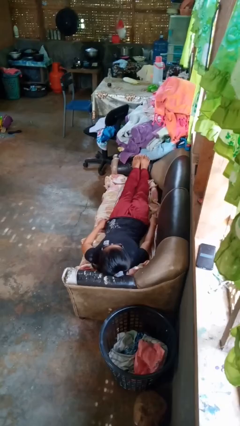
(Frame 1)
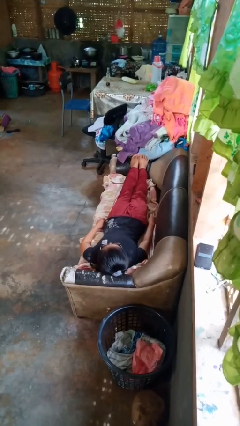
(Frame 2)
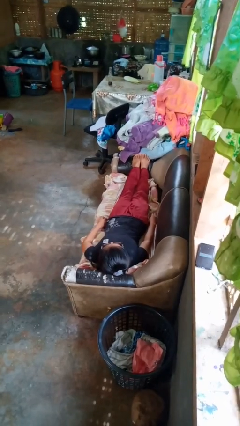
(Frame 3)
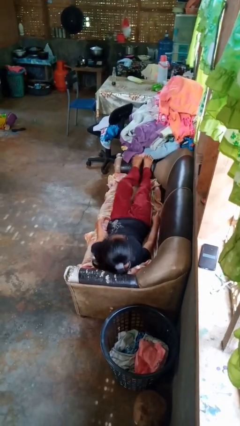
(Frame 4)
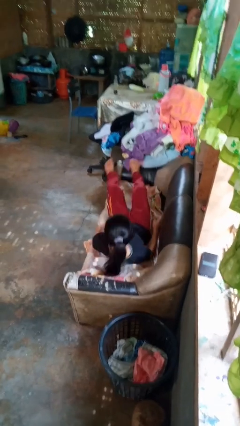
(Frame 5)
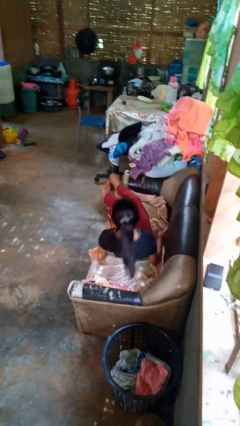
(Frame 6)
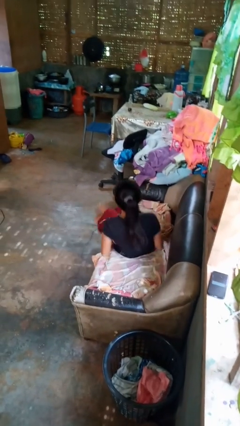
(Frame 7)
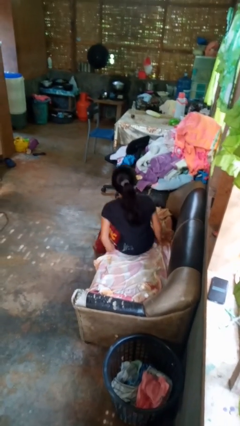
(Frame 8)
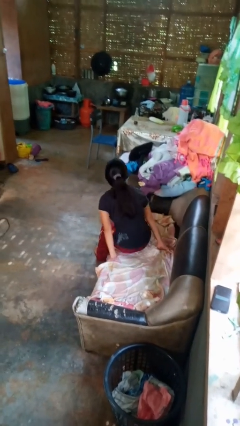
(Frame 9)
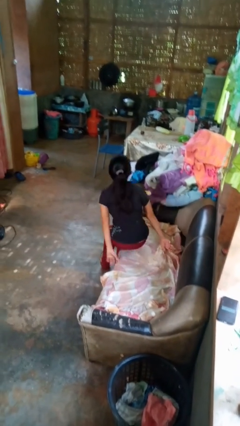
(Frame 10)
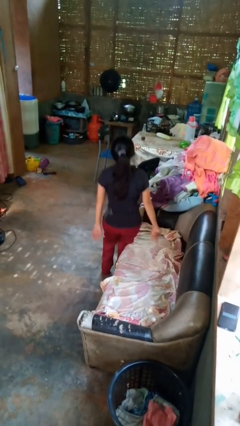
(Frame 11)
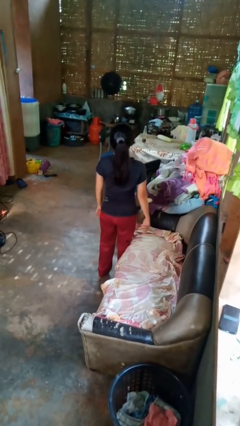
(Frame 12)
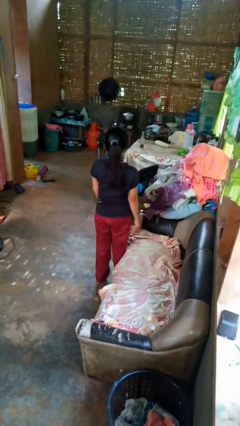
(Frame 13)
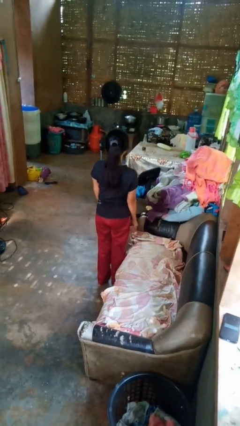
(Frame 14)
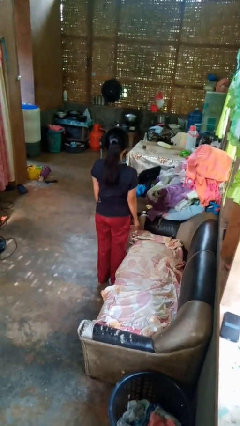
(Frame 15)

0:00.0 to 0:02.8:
person stands up

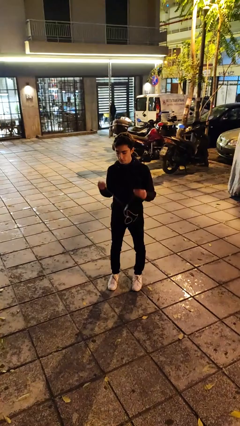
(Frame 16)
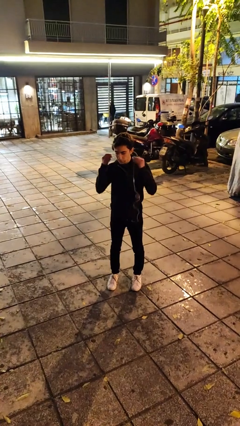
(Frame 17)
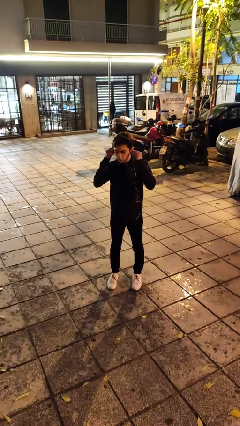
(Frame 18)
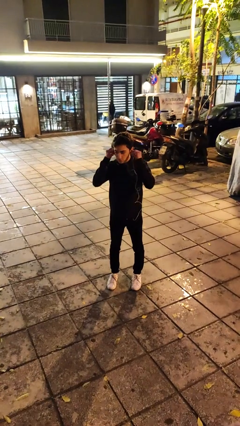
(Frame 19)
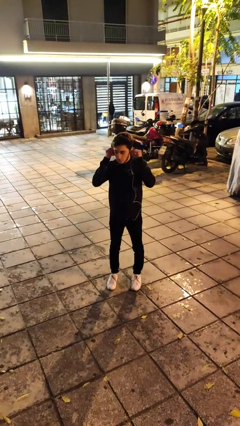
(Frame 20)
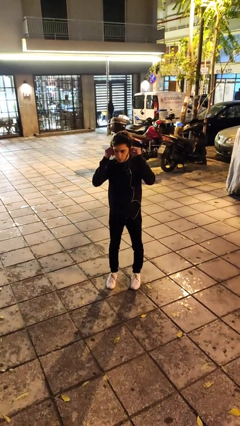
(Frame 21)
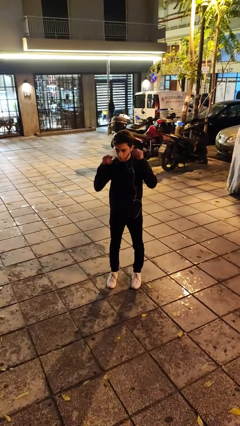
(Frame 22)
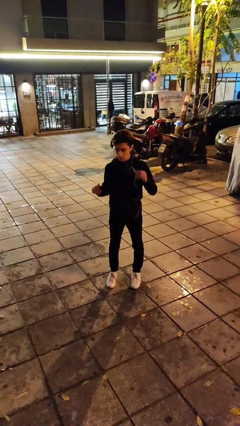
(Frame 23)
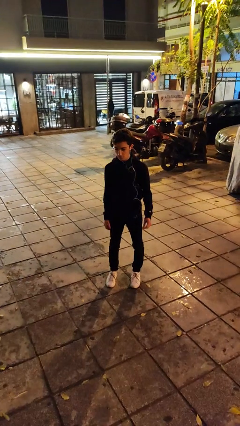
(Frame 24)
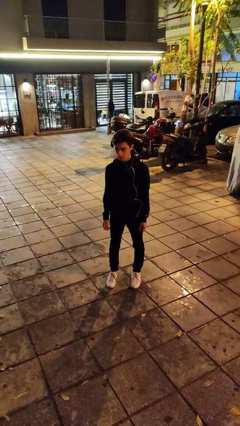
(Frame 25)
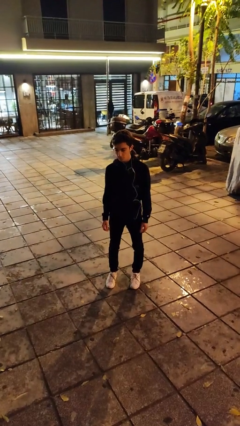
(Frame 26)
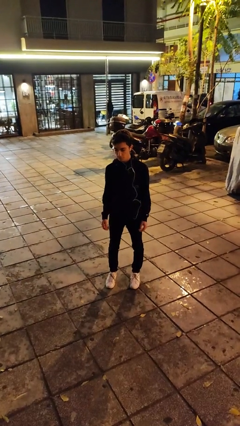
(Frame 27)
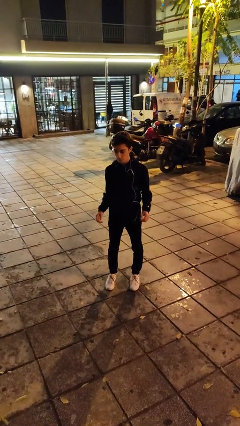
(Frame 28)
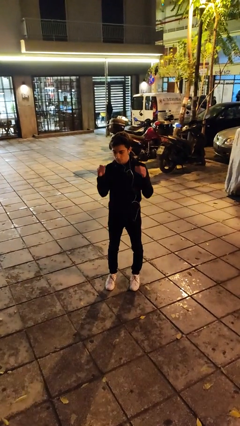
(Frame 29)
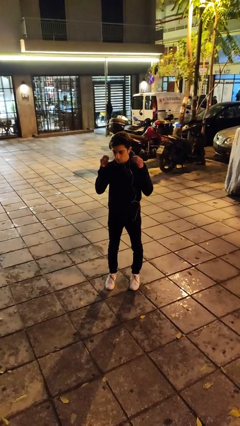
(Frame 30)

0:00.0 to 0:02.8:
person puts on headphones

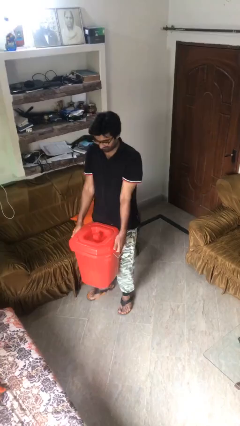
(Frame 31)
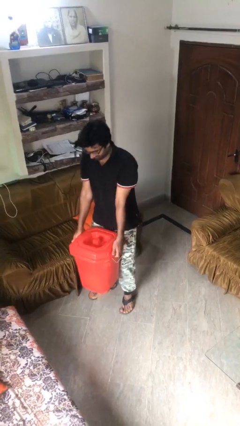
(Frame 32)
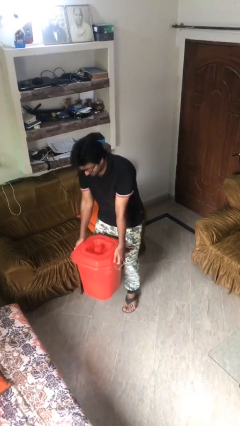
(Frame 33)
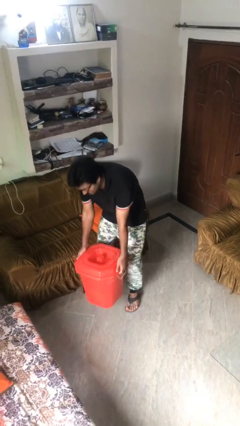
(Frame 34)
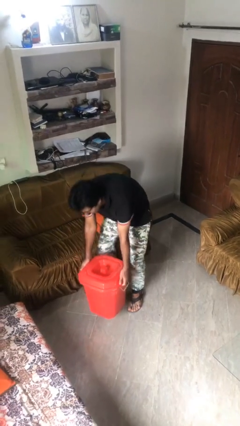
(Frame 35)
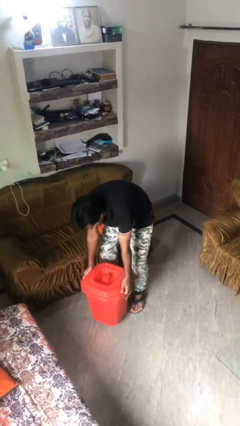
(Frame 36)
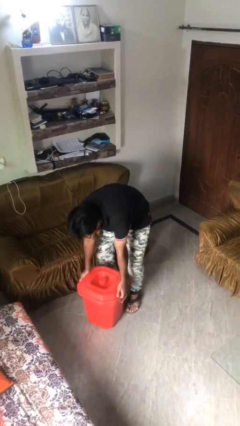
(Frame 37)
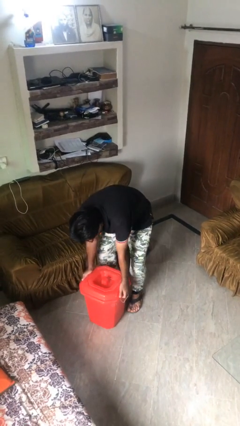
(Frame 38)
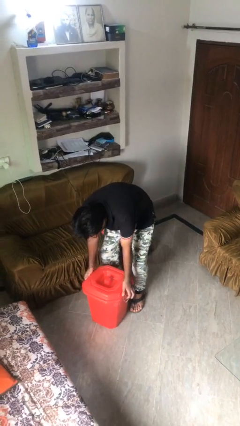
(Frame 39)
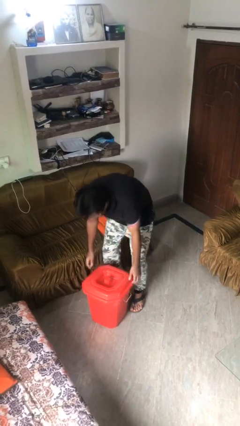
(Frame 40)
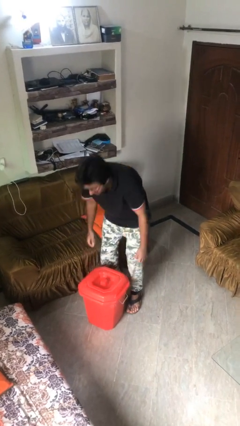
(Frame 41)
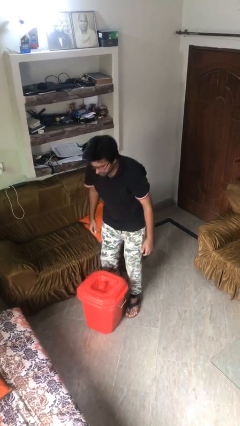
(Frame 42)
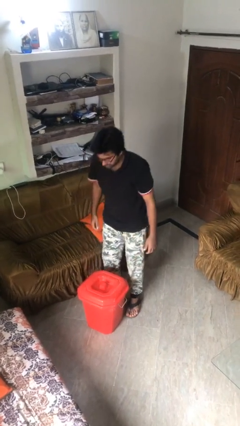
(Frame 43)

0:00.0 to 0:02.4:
person puts down object on floor

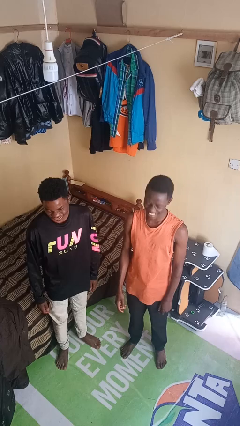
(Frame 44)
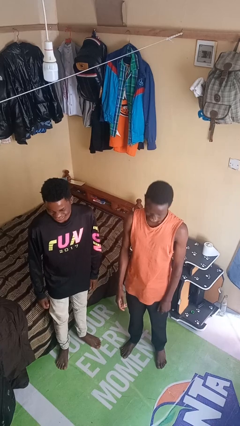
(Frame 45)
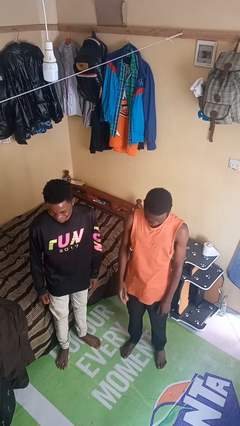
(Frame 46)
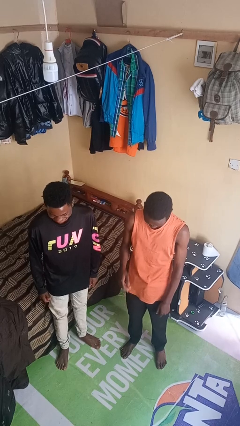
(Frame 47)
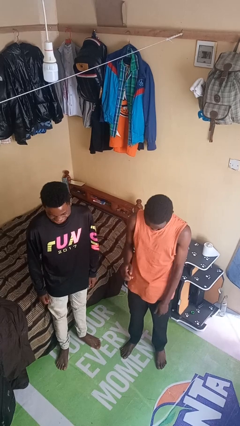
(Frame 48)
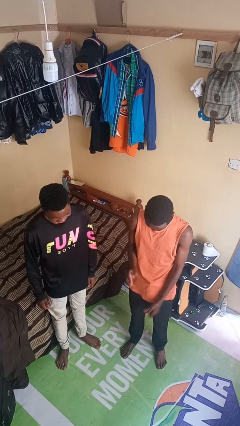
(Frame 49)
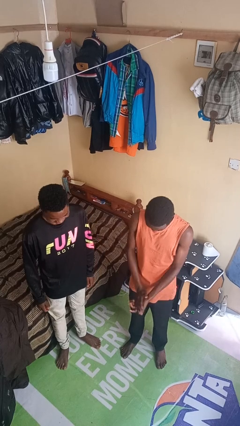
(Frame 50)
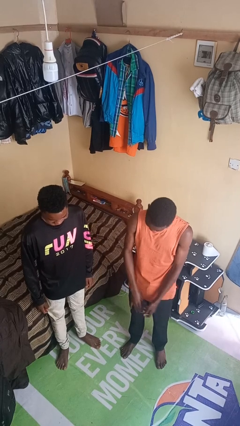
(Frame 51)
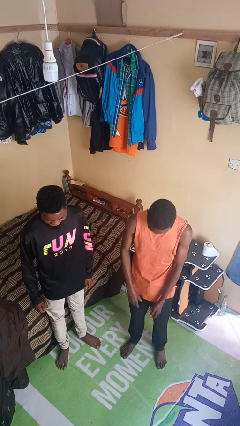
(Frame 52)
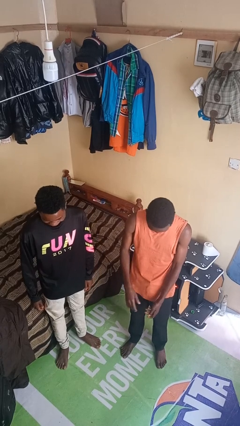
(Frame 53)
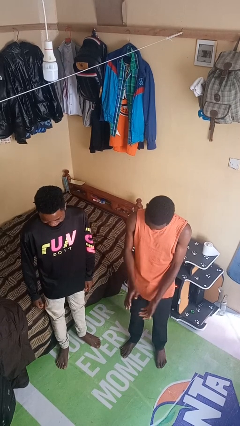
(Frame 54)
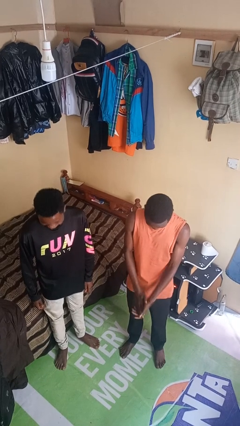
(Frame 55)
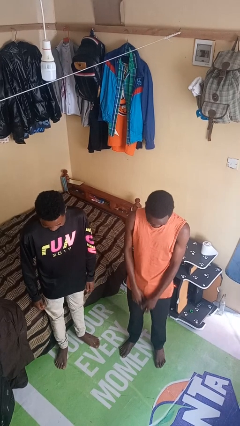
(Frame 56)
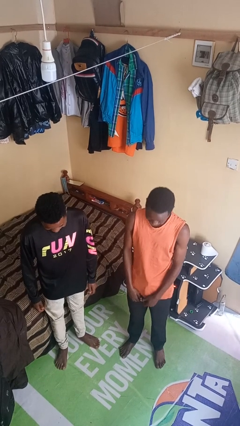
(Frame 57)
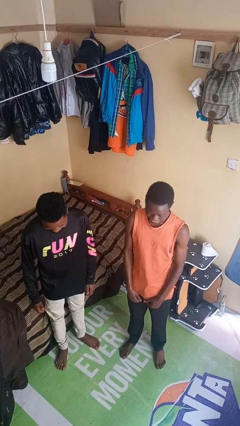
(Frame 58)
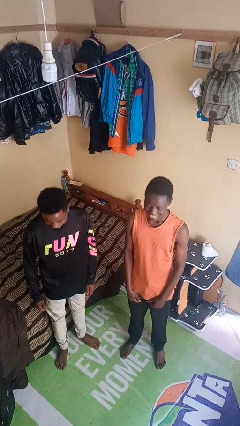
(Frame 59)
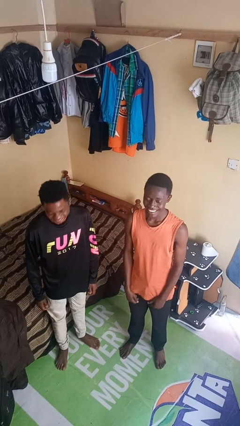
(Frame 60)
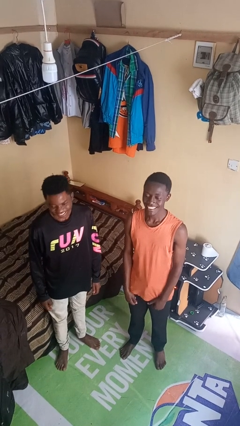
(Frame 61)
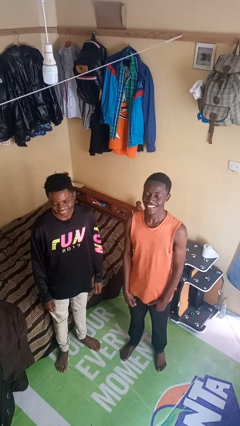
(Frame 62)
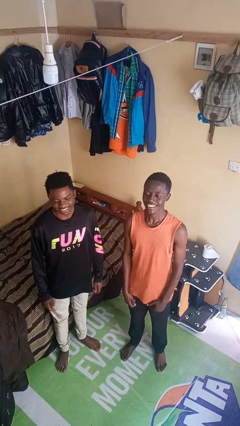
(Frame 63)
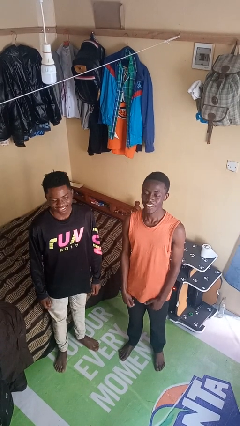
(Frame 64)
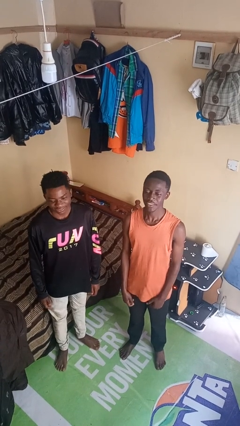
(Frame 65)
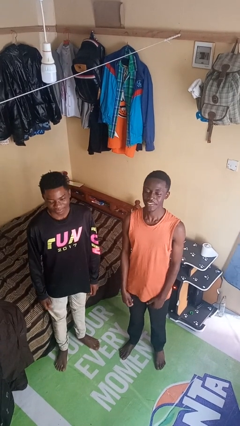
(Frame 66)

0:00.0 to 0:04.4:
person laughs with person

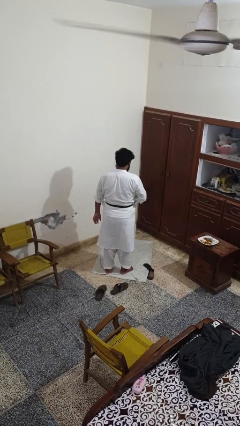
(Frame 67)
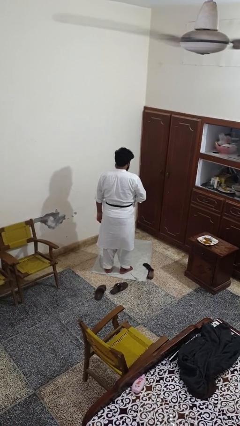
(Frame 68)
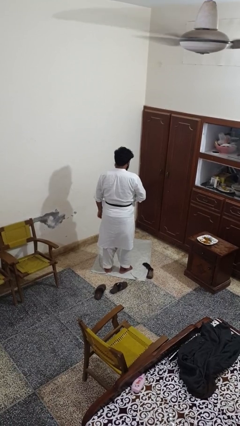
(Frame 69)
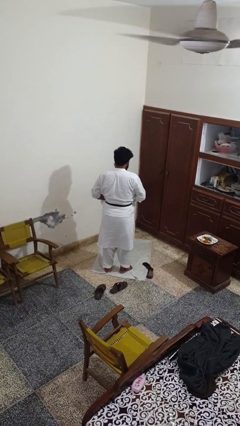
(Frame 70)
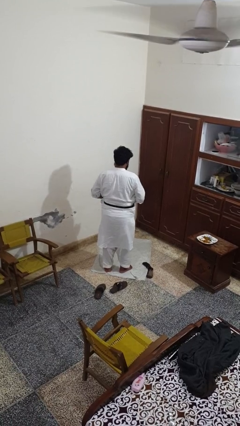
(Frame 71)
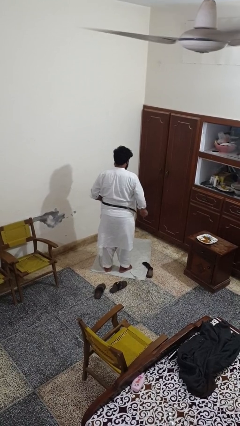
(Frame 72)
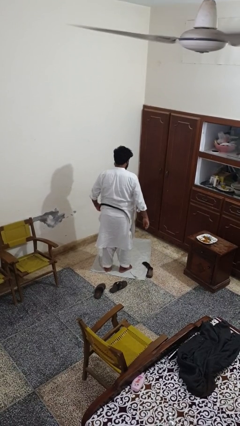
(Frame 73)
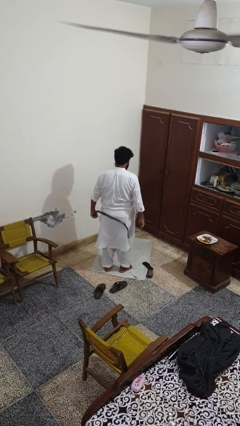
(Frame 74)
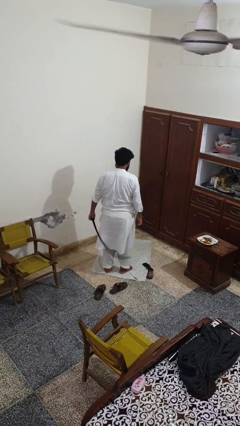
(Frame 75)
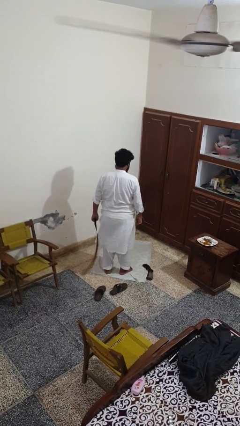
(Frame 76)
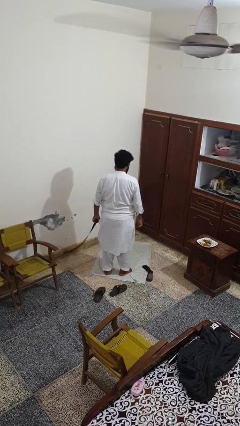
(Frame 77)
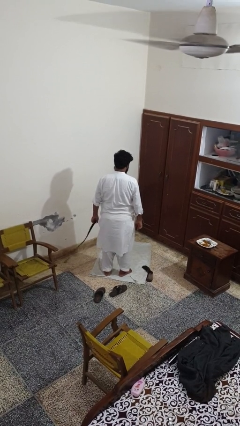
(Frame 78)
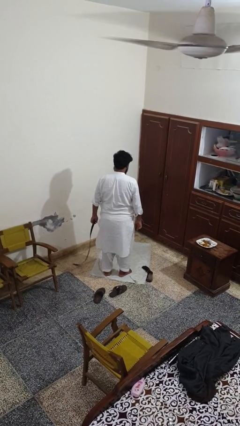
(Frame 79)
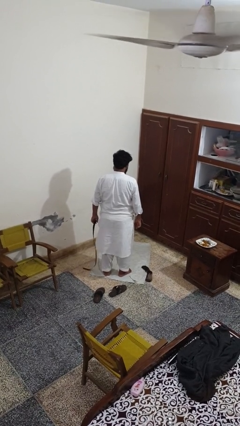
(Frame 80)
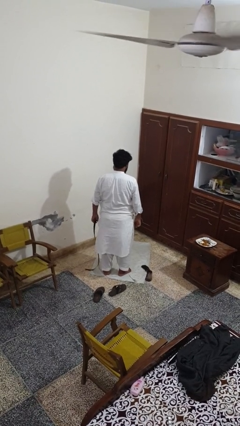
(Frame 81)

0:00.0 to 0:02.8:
person takes off belt

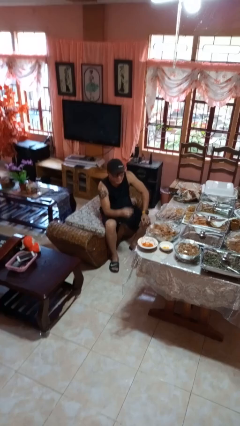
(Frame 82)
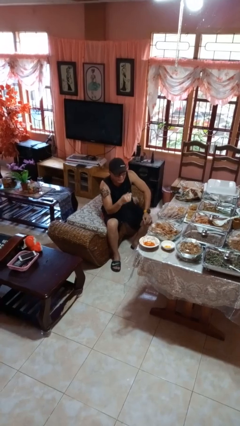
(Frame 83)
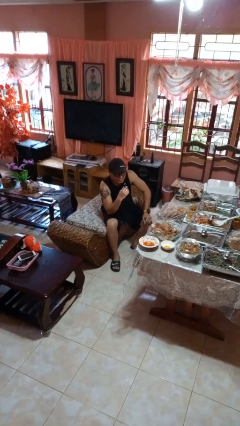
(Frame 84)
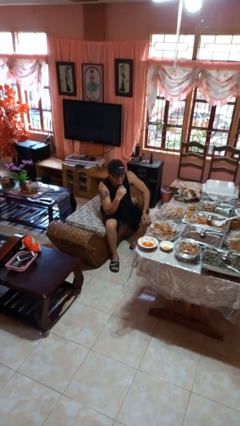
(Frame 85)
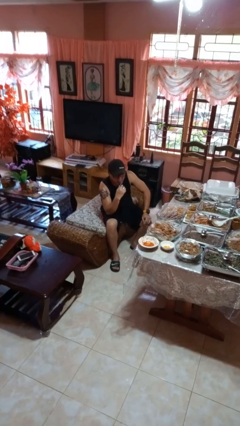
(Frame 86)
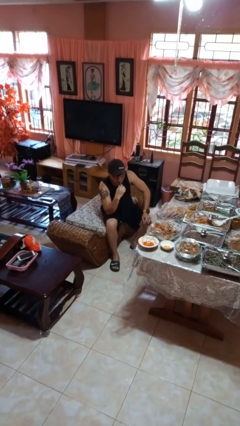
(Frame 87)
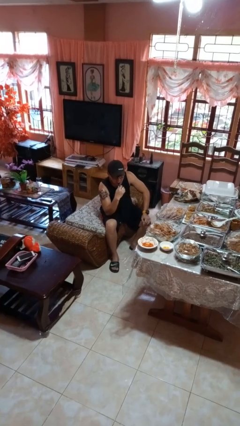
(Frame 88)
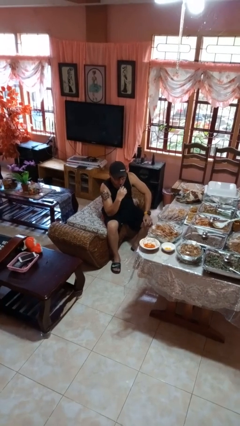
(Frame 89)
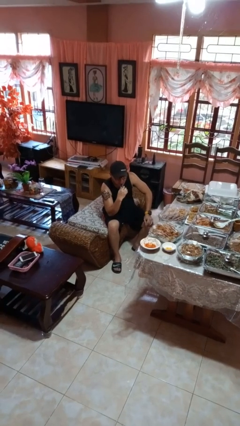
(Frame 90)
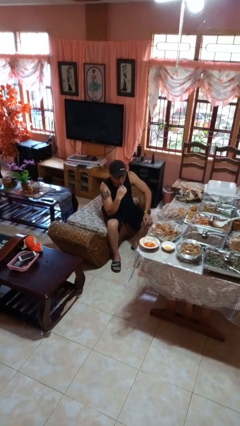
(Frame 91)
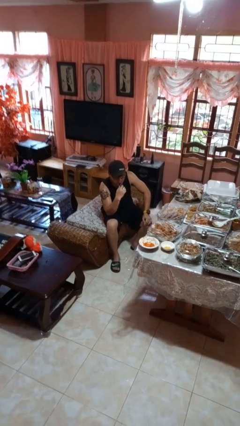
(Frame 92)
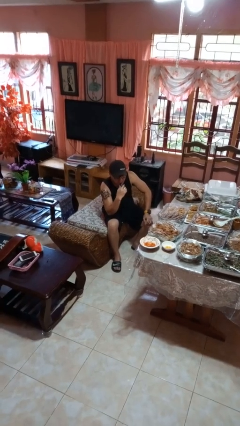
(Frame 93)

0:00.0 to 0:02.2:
person vapes

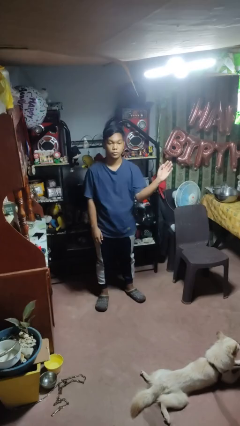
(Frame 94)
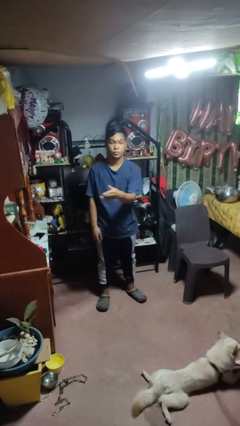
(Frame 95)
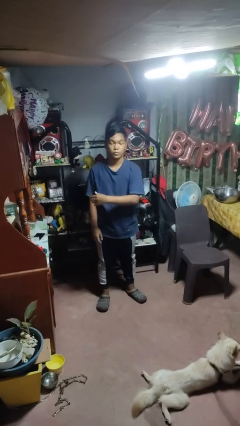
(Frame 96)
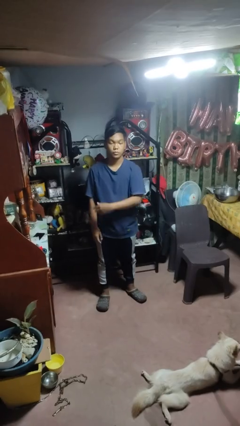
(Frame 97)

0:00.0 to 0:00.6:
person gestures swipe right
